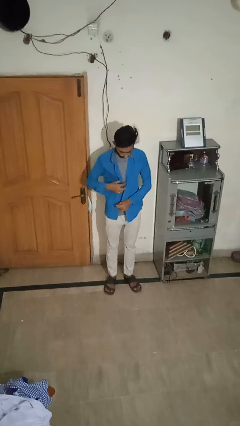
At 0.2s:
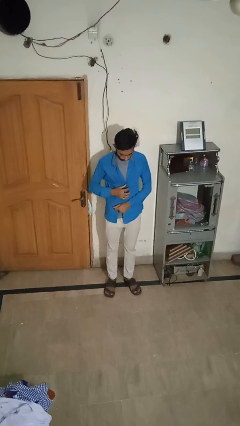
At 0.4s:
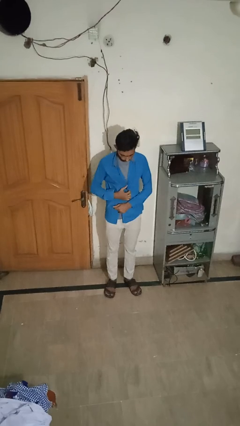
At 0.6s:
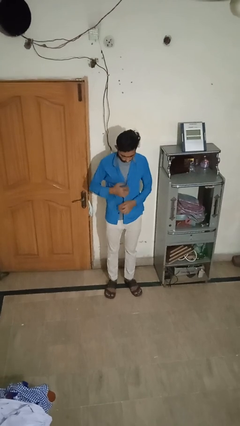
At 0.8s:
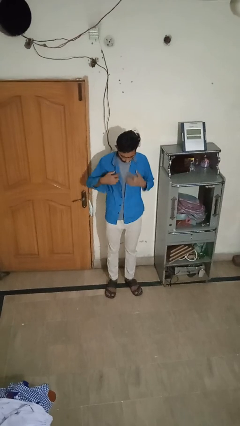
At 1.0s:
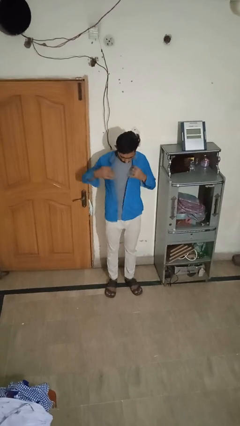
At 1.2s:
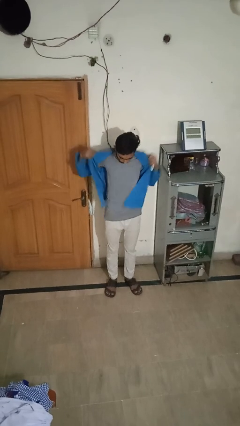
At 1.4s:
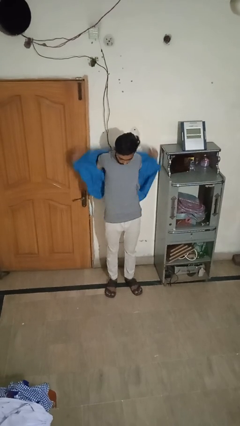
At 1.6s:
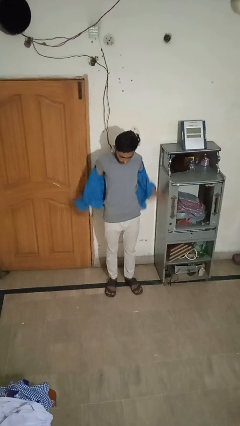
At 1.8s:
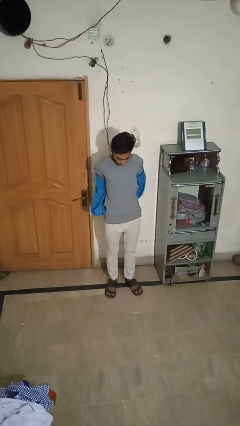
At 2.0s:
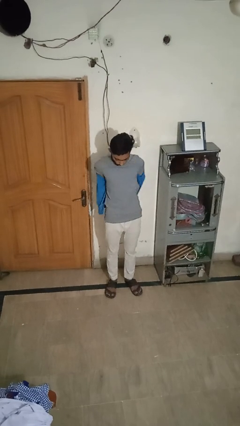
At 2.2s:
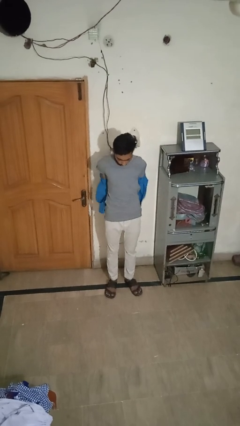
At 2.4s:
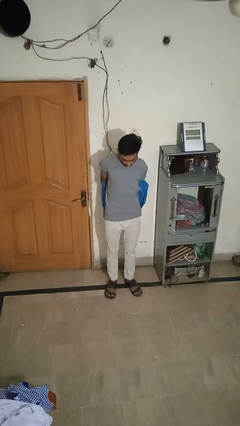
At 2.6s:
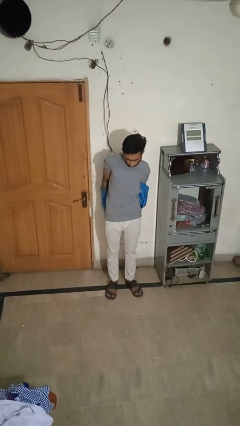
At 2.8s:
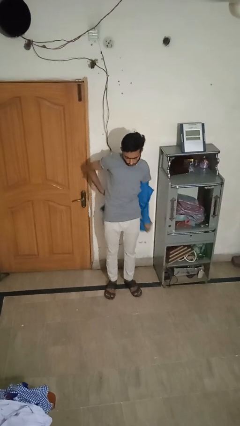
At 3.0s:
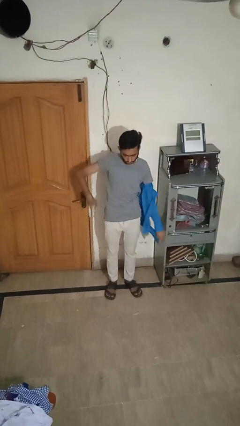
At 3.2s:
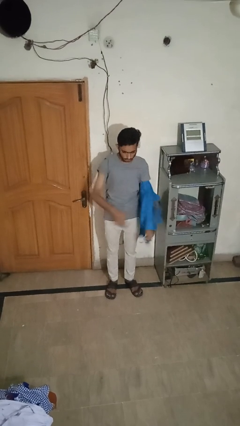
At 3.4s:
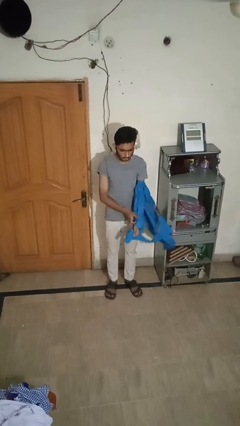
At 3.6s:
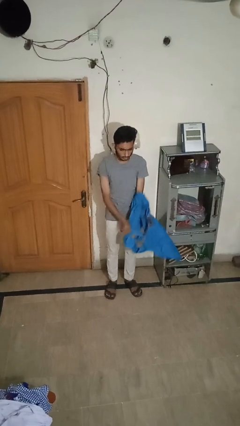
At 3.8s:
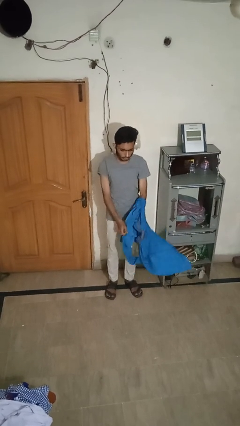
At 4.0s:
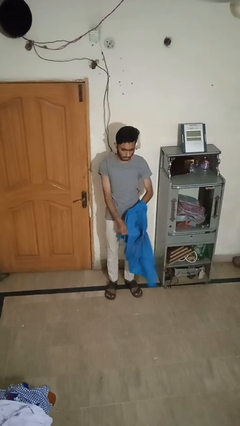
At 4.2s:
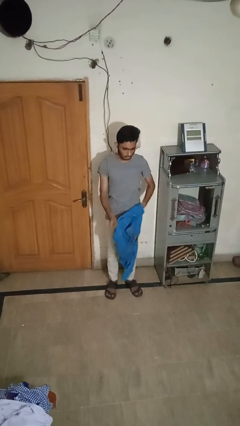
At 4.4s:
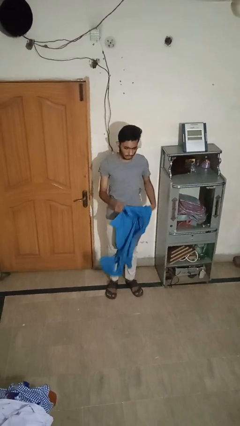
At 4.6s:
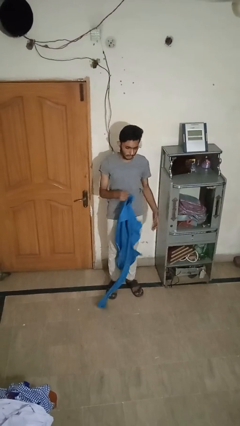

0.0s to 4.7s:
person takes off shirt

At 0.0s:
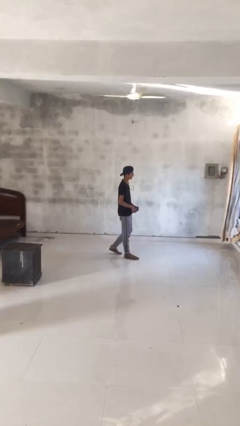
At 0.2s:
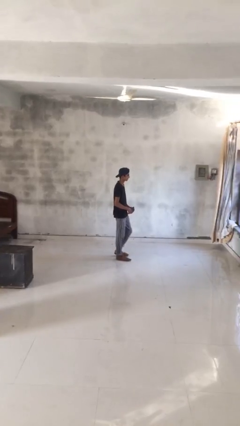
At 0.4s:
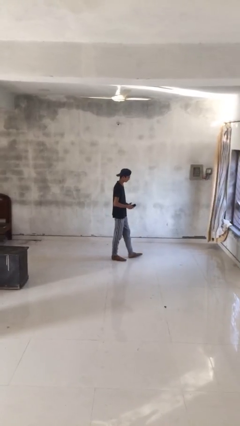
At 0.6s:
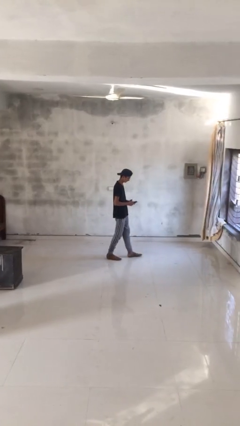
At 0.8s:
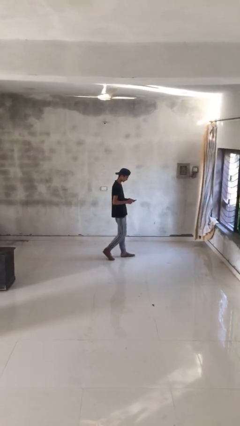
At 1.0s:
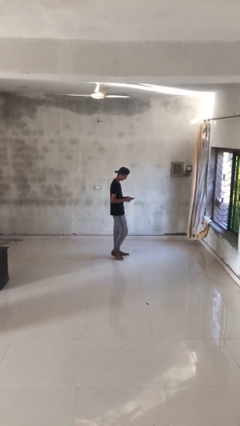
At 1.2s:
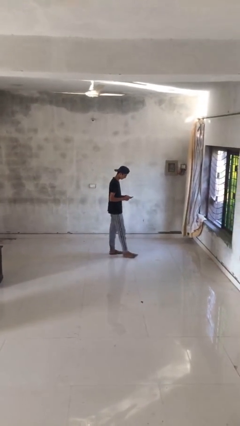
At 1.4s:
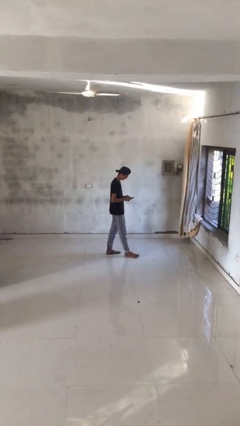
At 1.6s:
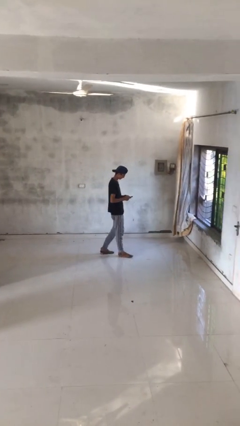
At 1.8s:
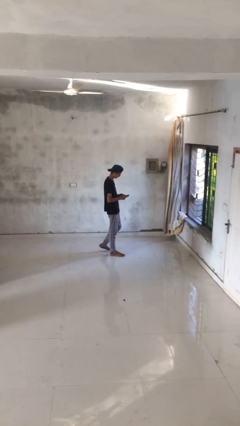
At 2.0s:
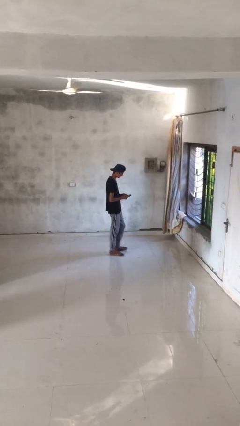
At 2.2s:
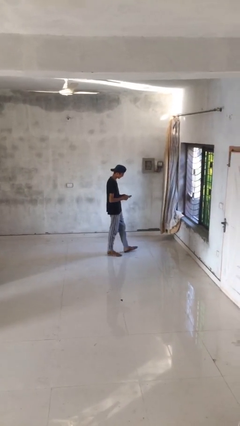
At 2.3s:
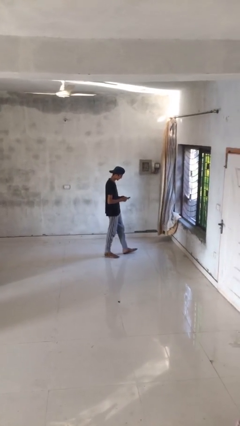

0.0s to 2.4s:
person texts on phone

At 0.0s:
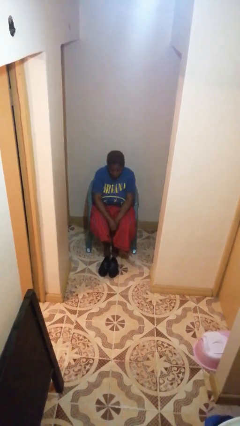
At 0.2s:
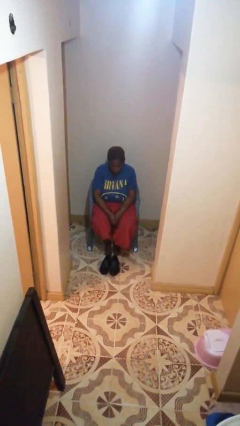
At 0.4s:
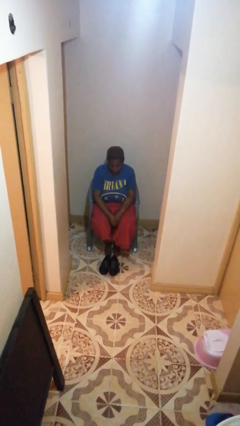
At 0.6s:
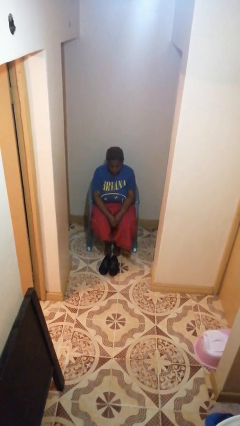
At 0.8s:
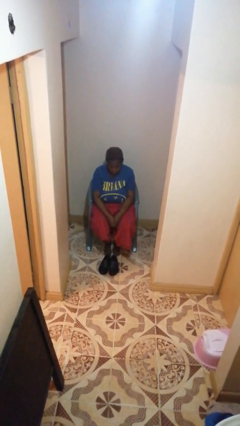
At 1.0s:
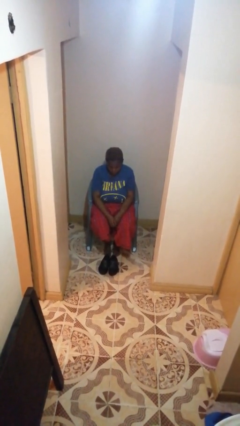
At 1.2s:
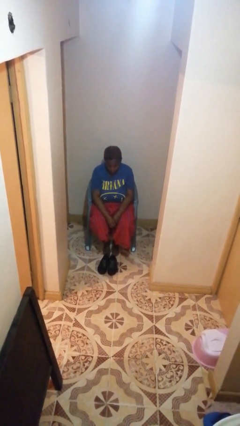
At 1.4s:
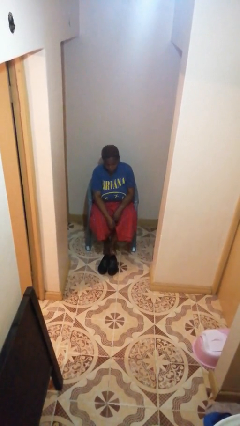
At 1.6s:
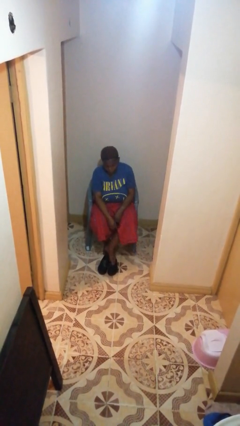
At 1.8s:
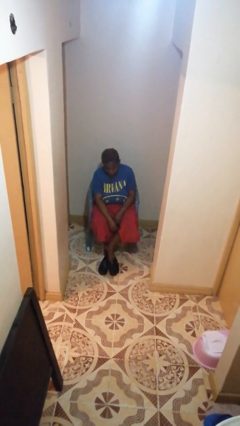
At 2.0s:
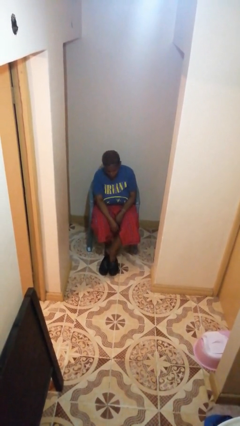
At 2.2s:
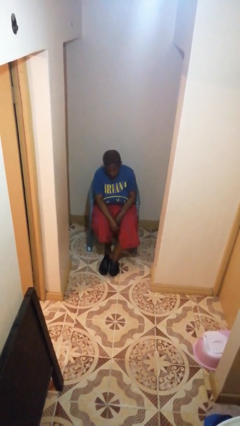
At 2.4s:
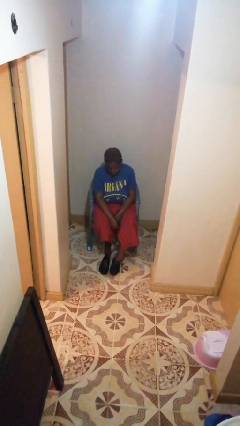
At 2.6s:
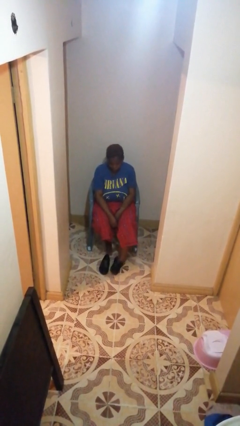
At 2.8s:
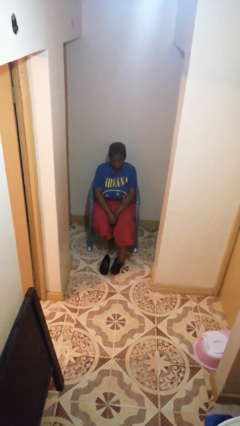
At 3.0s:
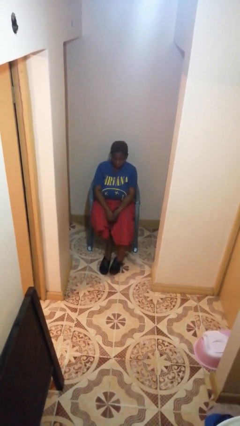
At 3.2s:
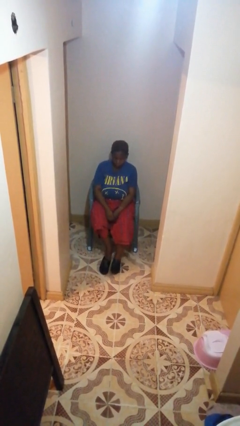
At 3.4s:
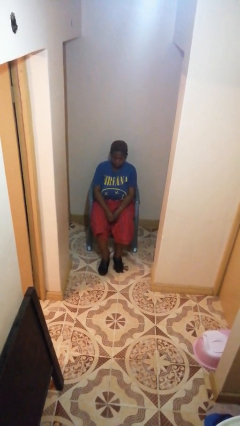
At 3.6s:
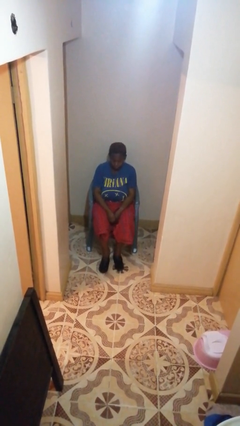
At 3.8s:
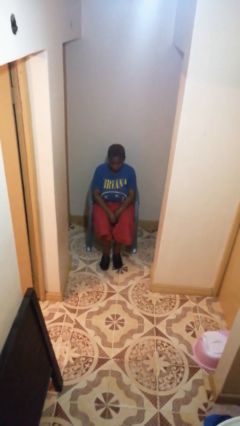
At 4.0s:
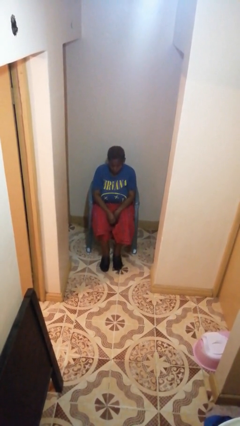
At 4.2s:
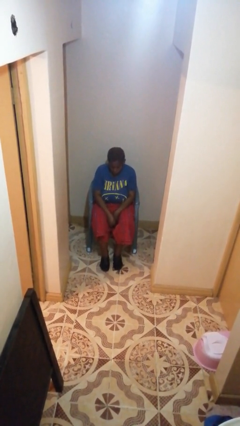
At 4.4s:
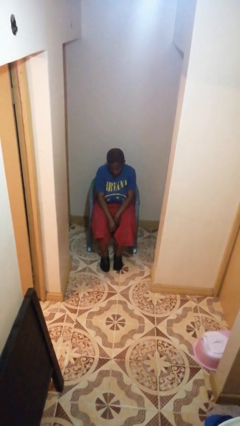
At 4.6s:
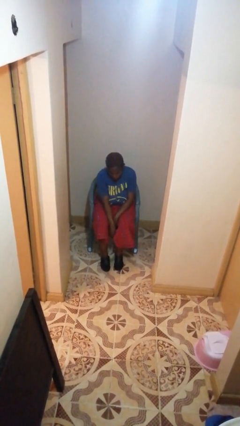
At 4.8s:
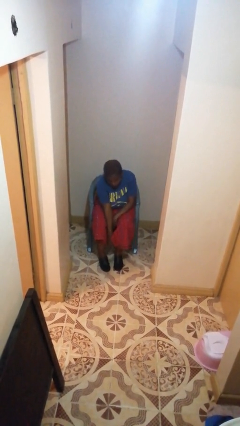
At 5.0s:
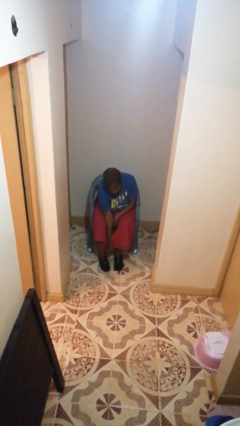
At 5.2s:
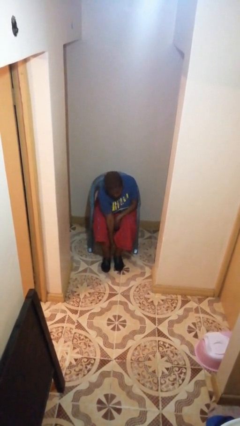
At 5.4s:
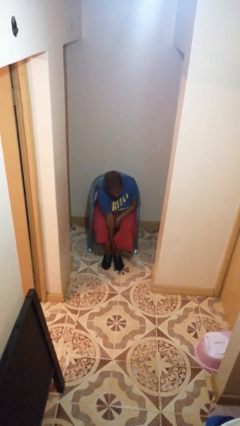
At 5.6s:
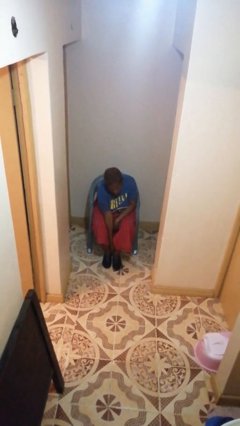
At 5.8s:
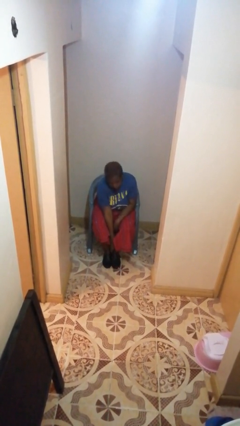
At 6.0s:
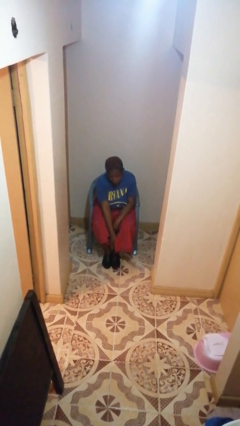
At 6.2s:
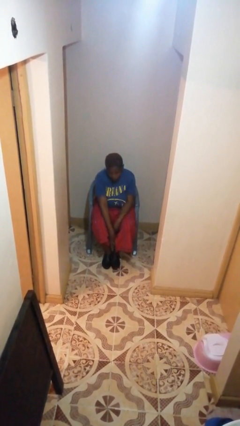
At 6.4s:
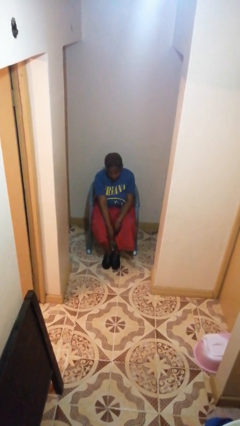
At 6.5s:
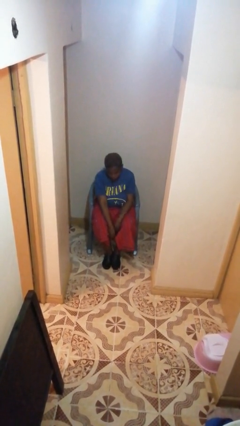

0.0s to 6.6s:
person puts on shoes

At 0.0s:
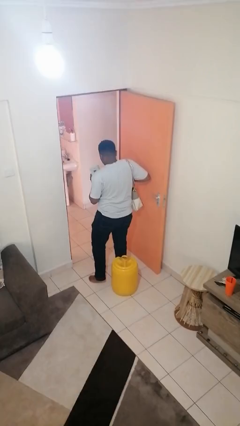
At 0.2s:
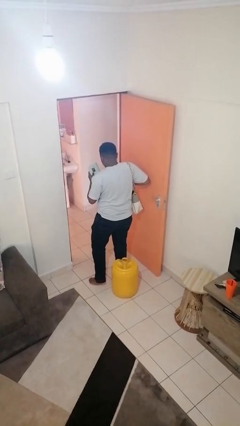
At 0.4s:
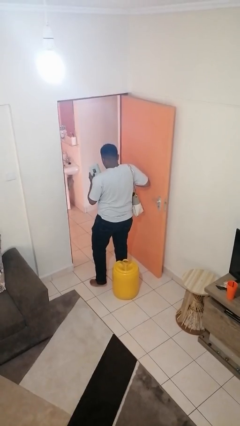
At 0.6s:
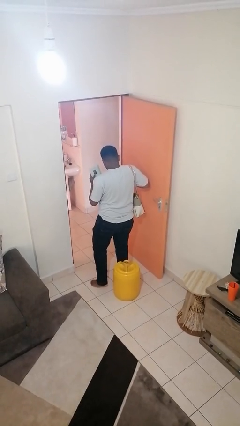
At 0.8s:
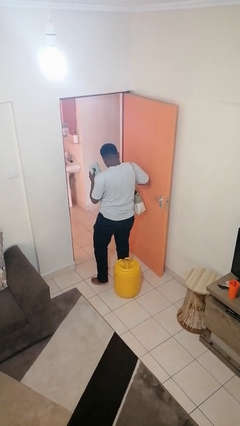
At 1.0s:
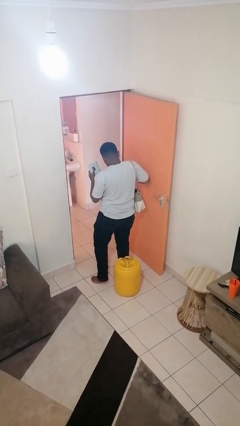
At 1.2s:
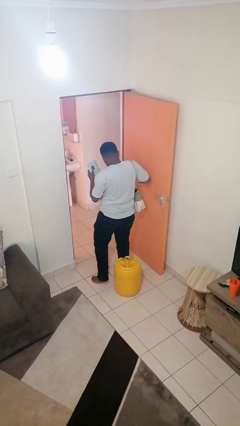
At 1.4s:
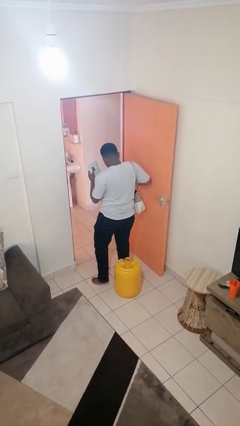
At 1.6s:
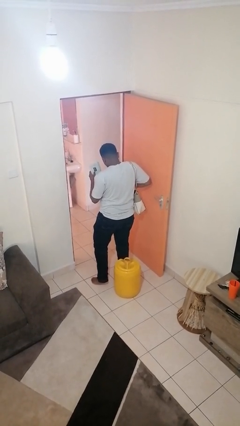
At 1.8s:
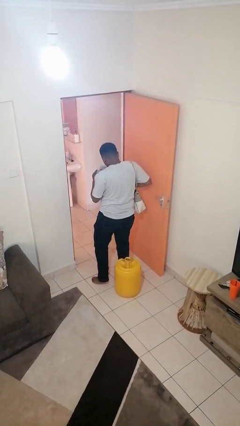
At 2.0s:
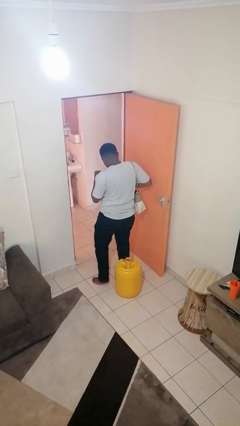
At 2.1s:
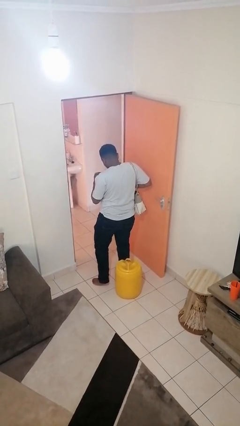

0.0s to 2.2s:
person takes object from purse

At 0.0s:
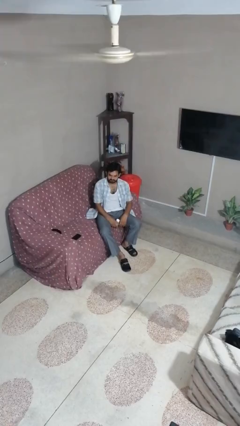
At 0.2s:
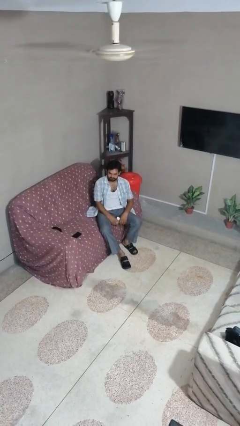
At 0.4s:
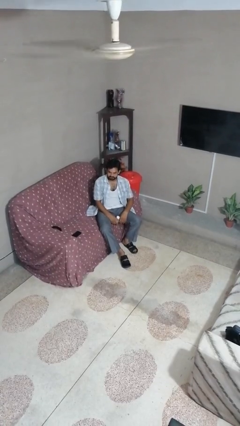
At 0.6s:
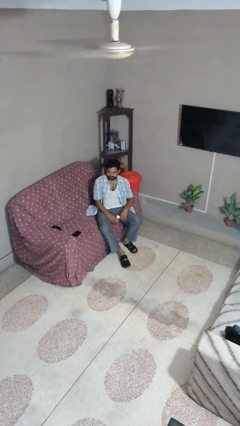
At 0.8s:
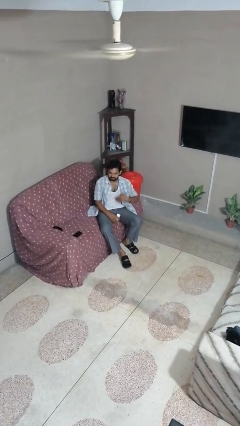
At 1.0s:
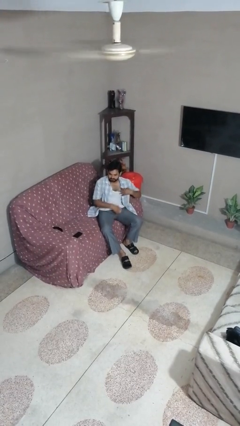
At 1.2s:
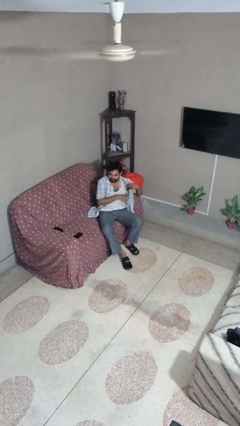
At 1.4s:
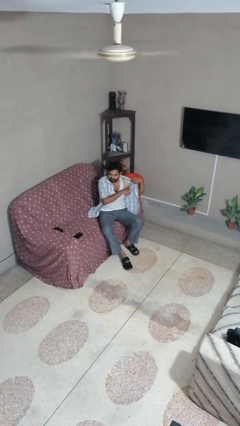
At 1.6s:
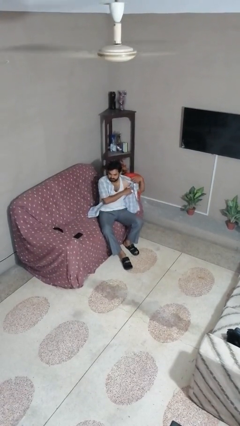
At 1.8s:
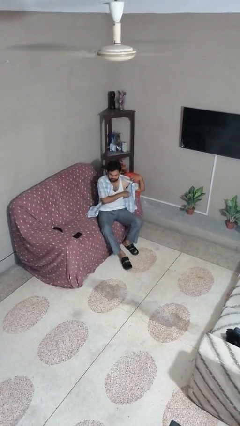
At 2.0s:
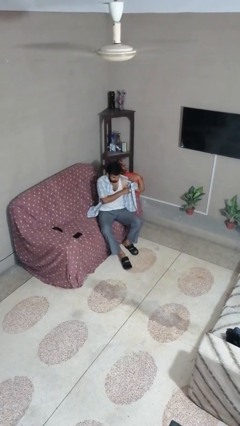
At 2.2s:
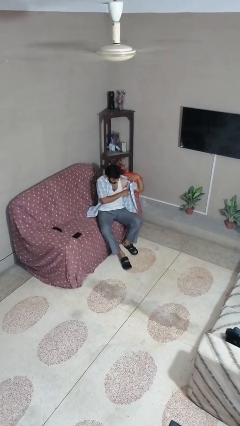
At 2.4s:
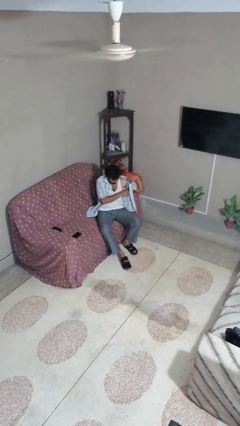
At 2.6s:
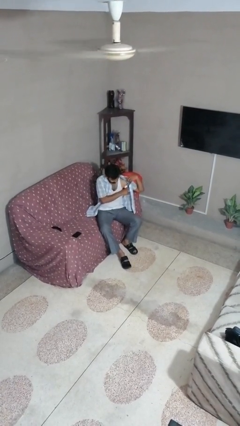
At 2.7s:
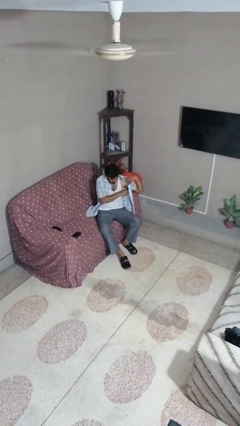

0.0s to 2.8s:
person applies deodorant
